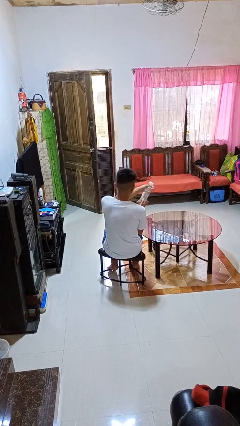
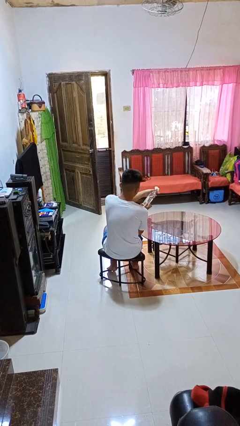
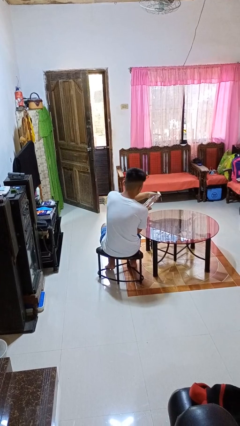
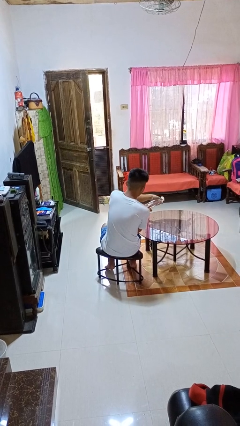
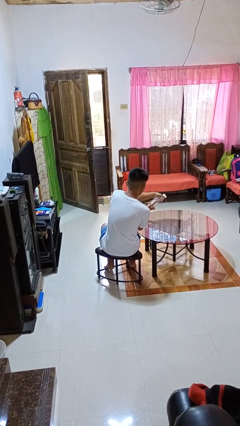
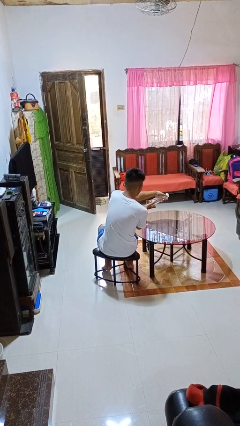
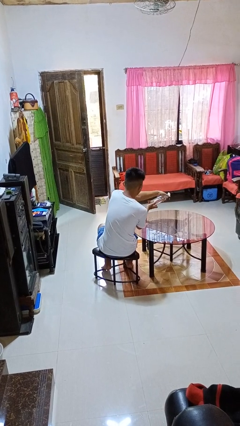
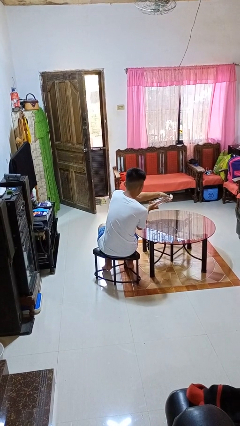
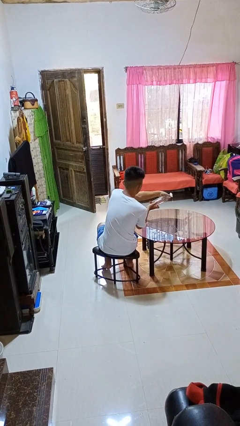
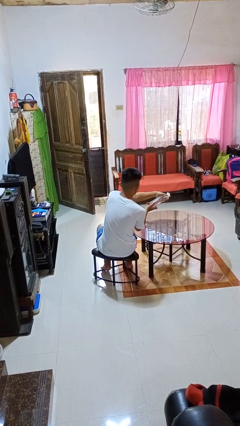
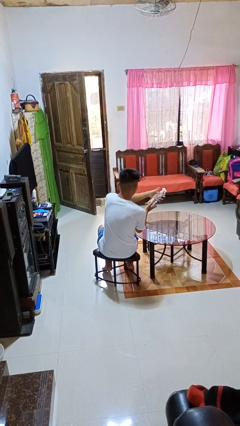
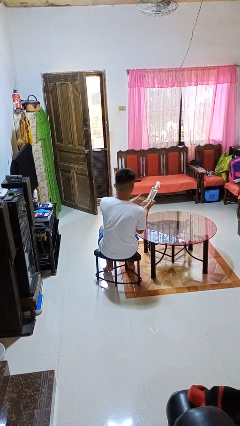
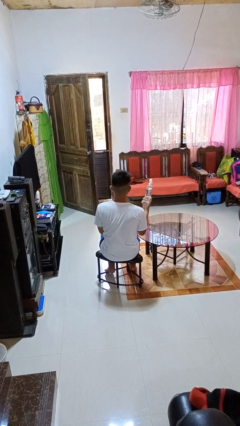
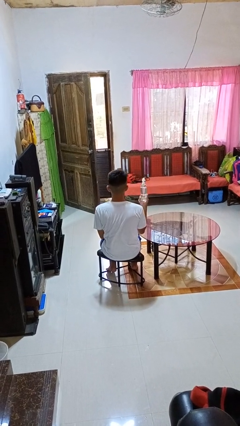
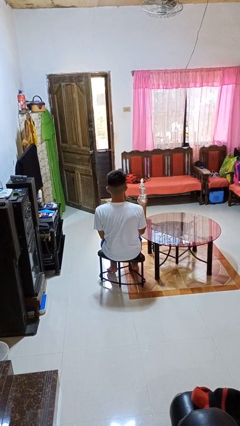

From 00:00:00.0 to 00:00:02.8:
person sprays from bottle

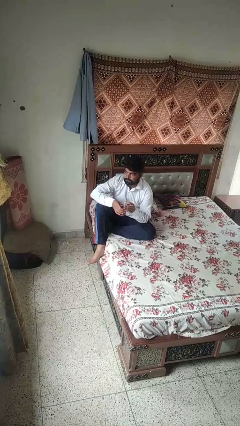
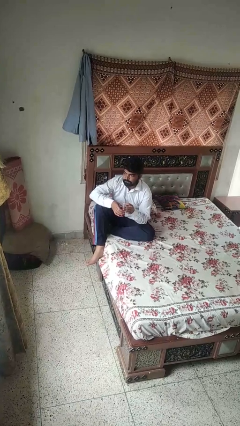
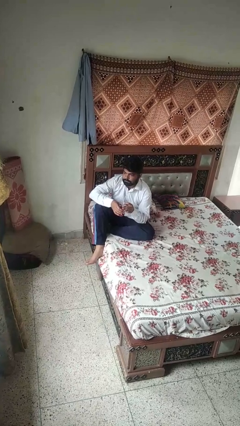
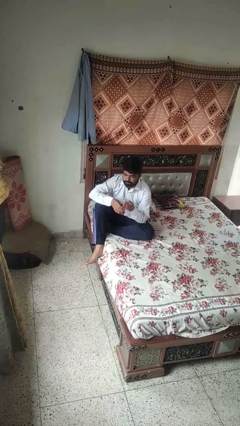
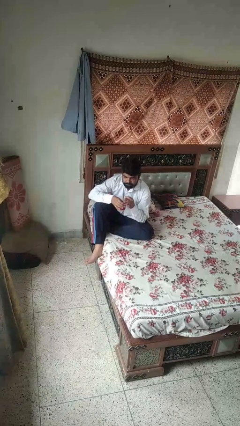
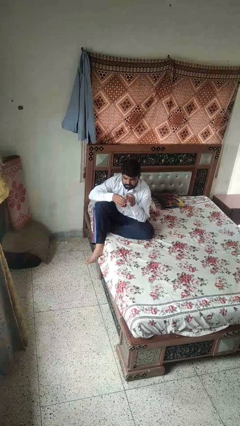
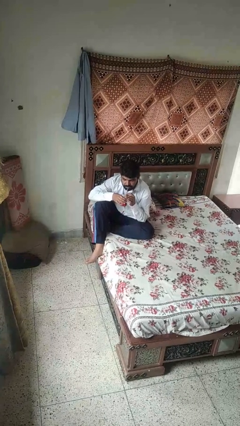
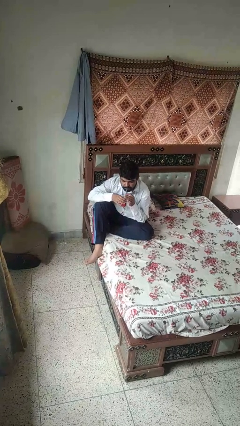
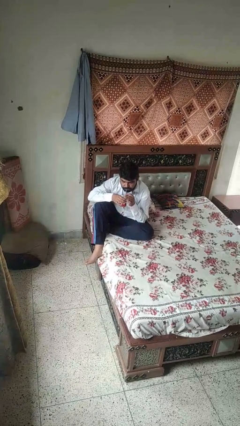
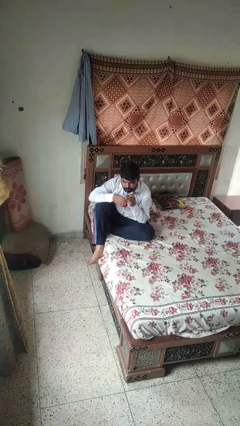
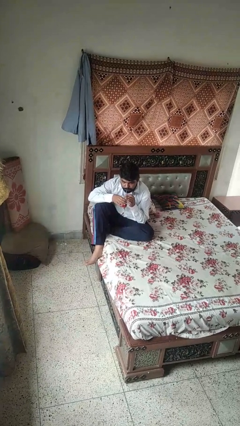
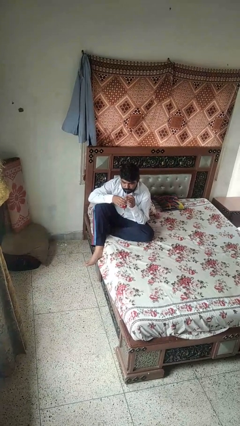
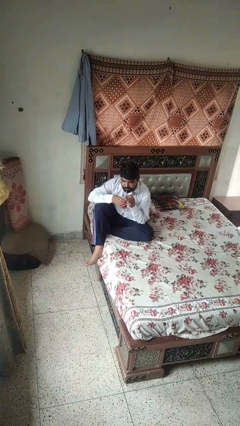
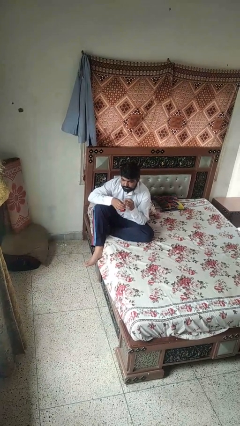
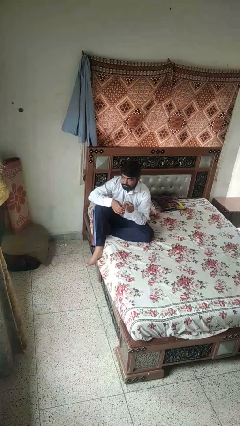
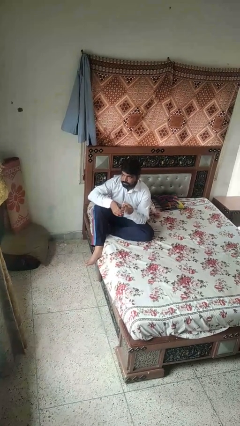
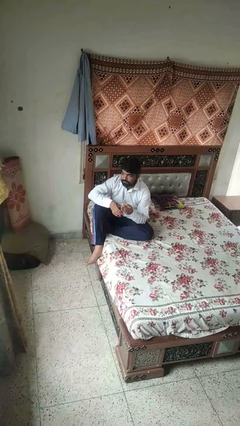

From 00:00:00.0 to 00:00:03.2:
person drinks from straw

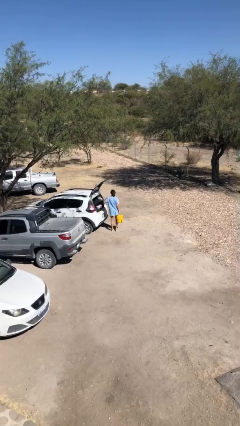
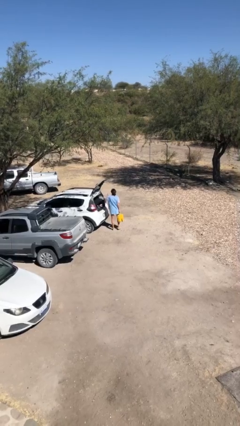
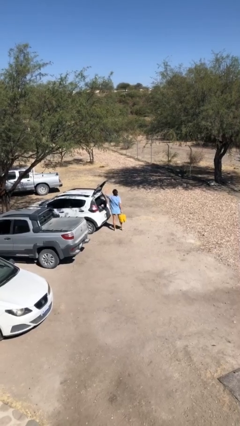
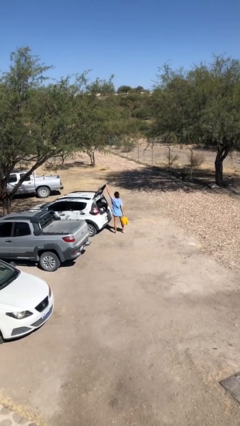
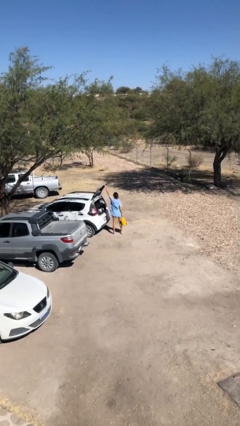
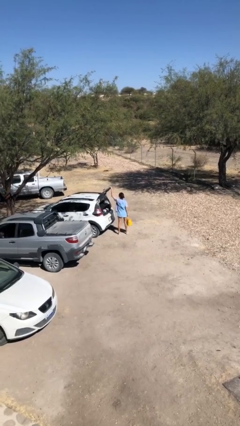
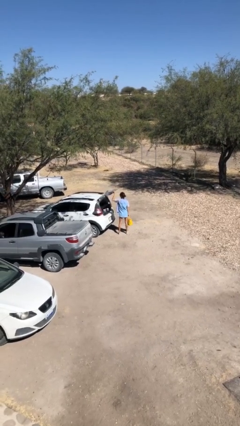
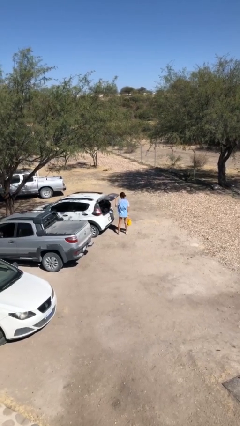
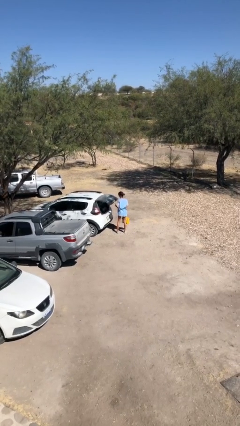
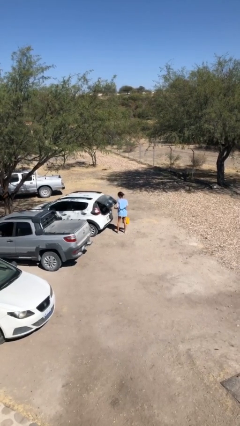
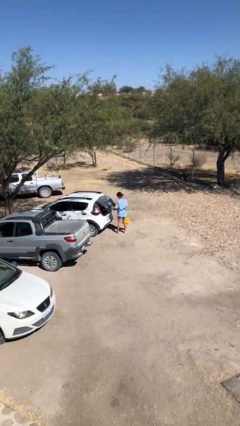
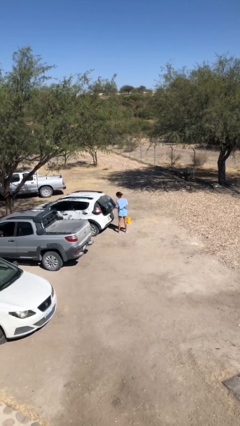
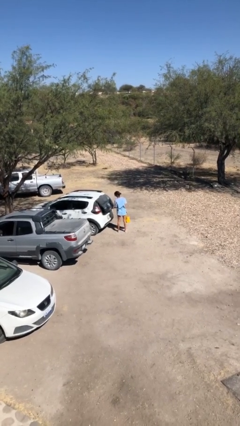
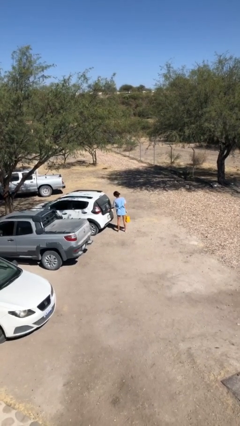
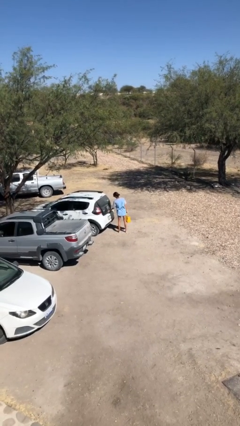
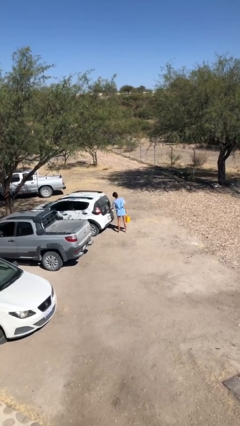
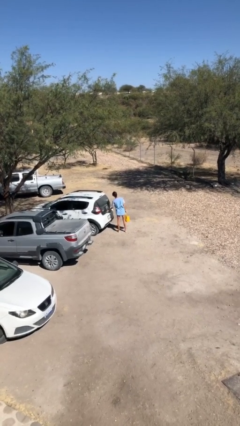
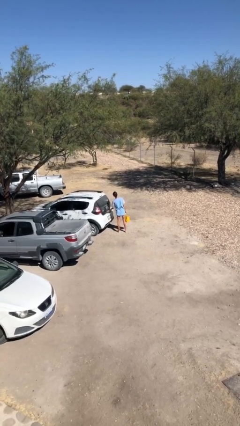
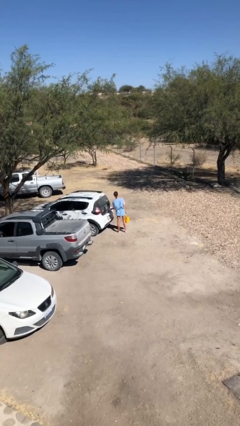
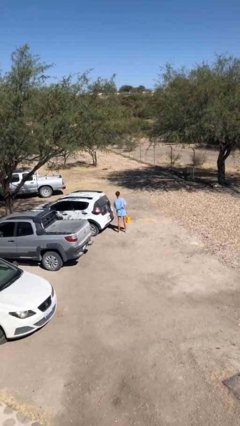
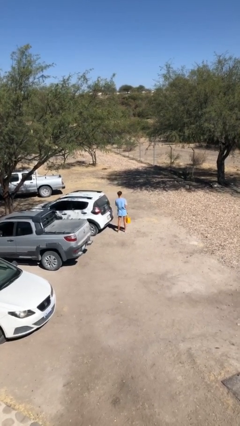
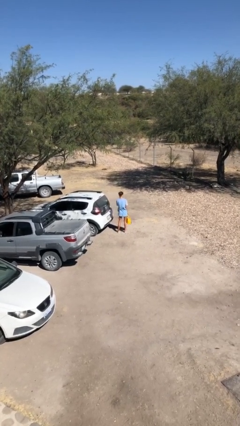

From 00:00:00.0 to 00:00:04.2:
person closes car trunk

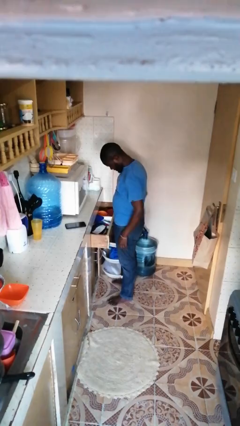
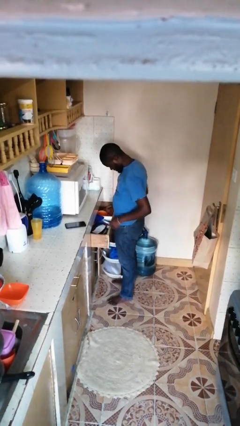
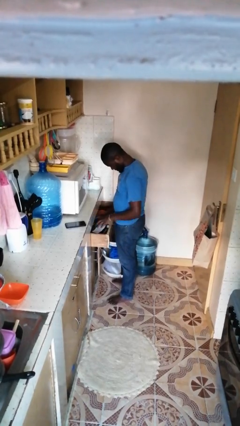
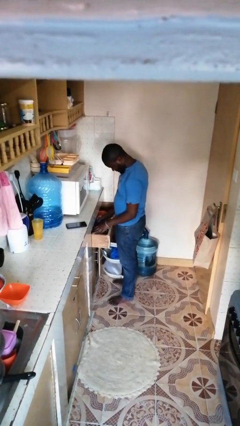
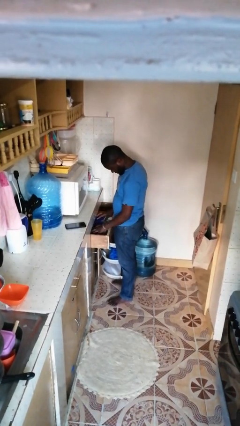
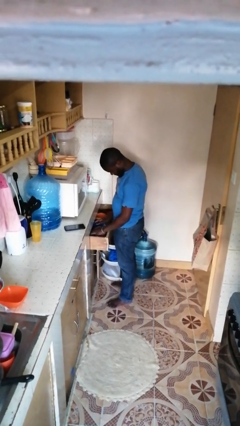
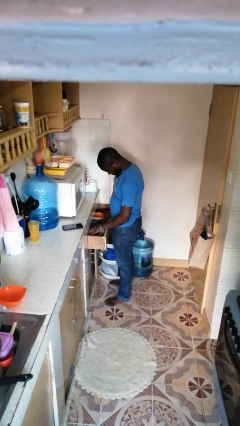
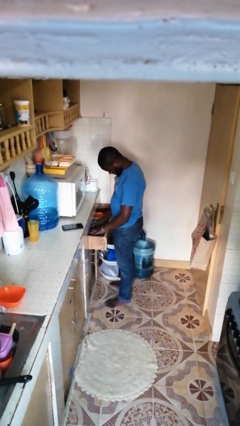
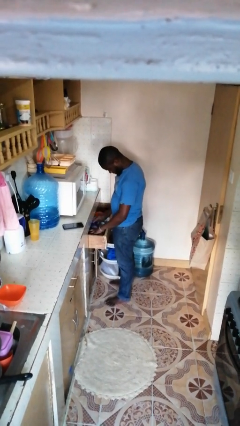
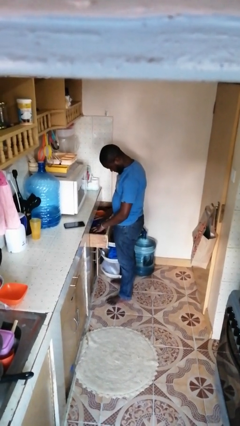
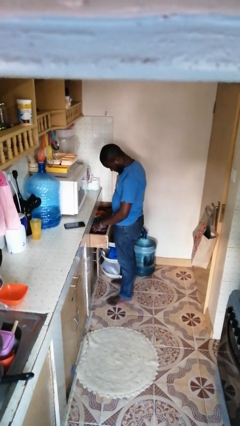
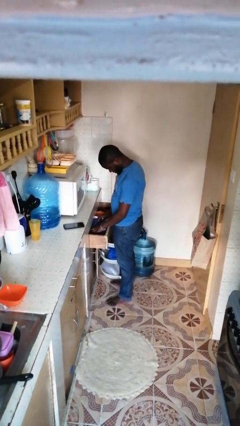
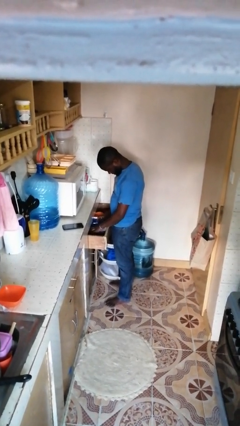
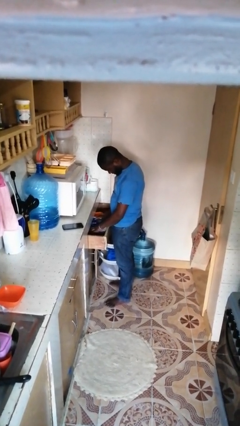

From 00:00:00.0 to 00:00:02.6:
person searches in kitchen drawer

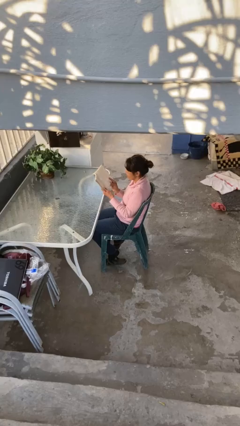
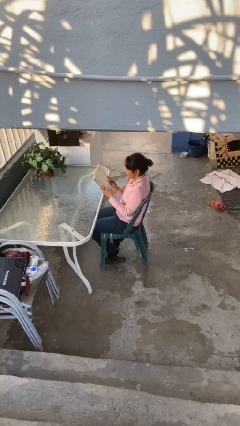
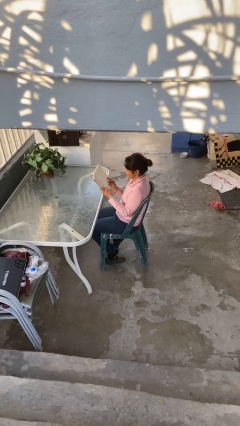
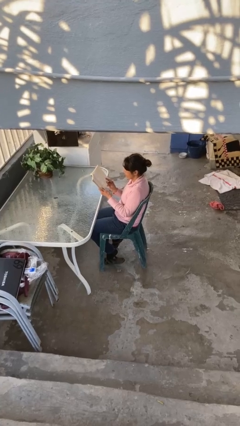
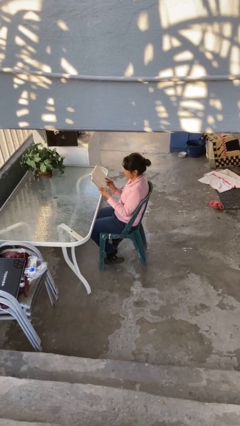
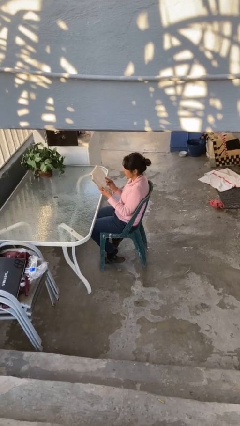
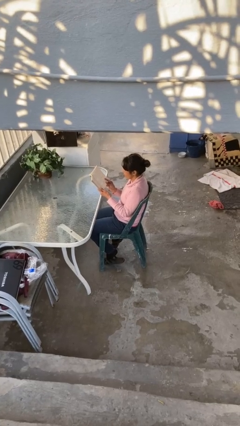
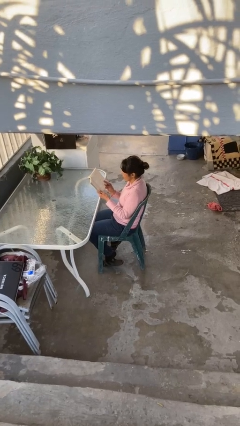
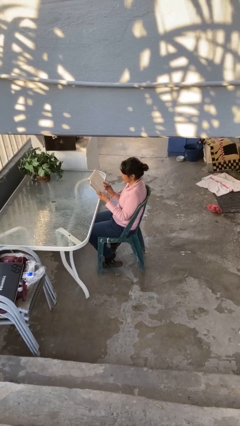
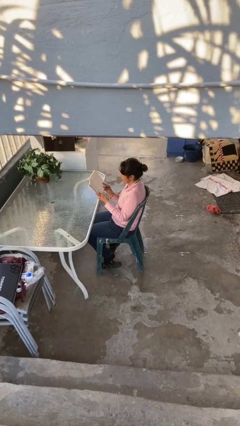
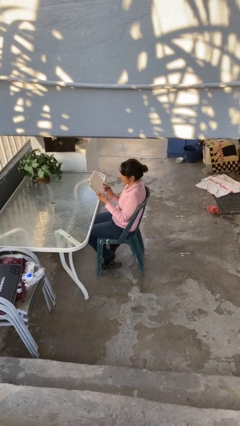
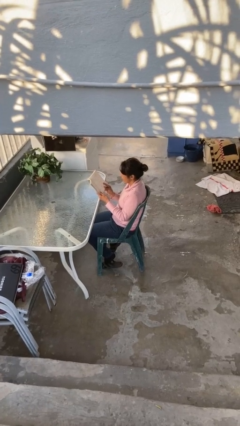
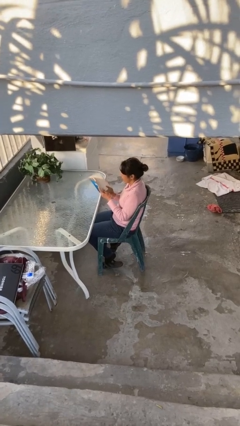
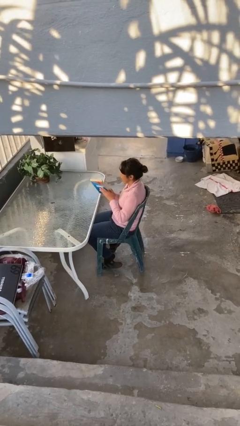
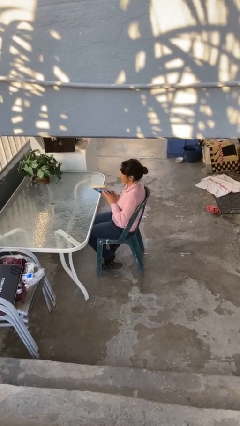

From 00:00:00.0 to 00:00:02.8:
person reads document

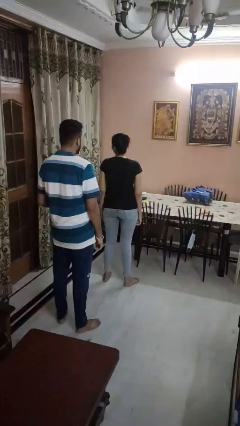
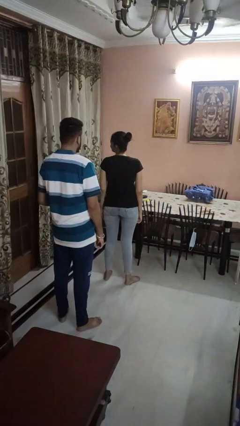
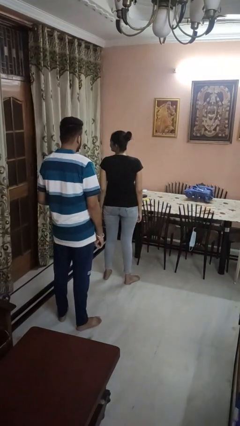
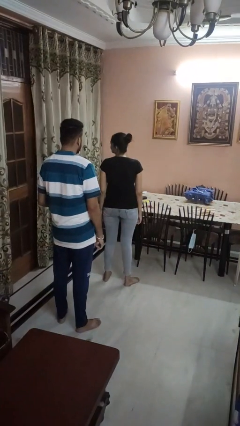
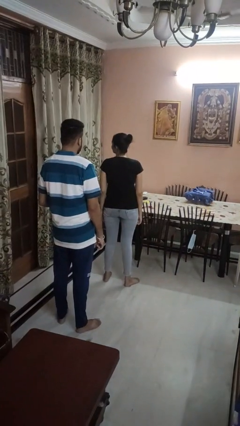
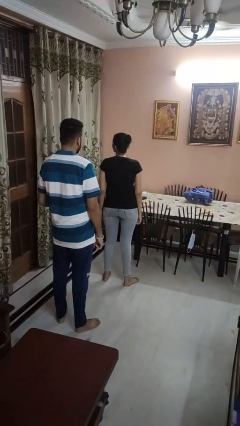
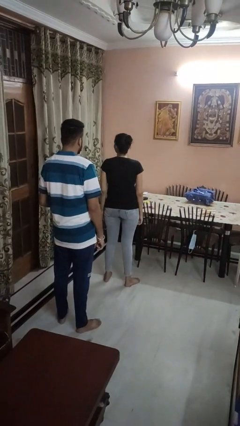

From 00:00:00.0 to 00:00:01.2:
person looks over shoulder

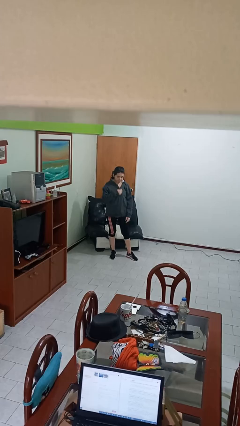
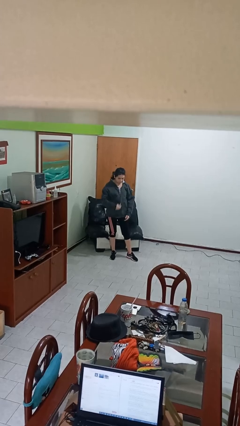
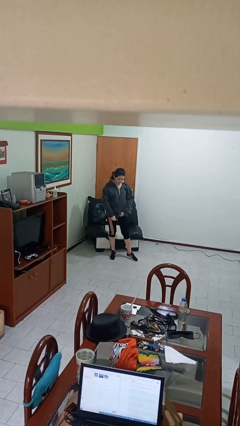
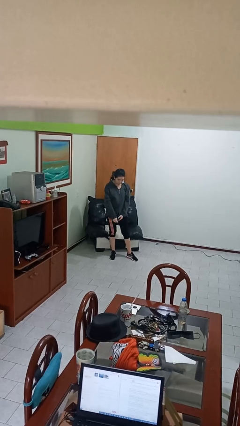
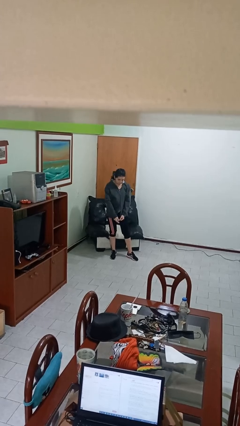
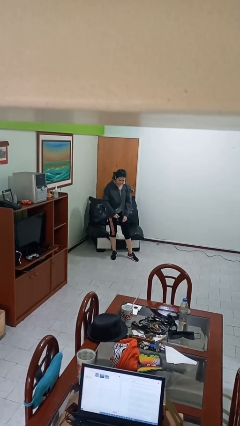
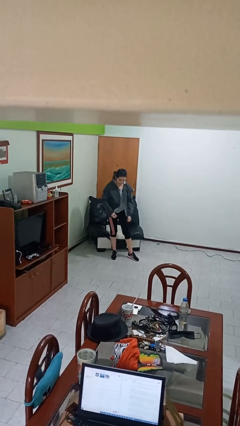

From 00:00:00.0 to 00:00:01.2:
person unzips jacket
